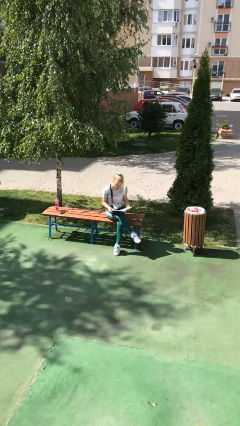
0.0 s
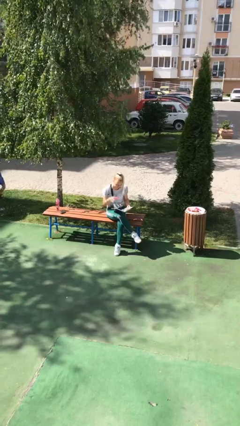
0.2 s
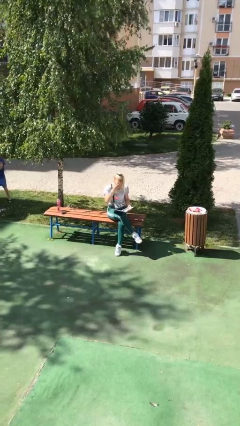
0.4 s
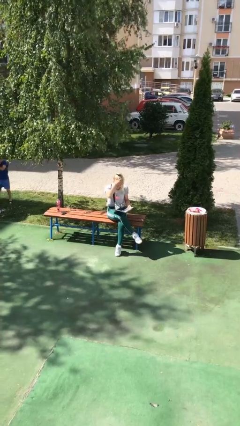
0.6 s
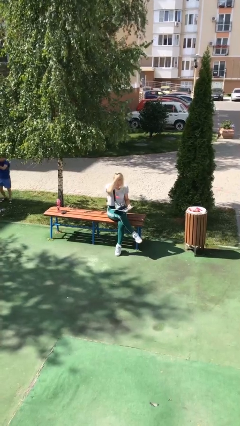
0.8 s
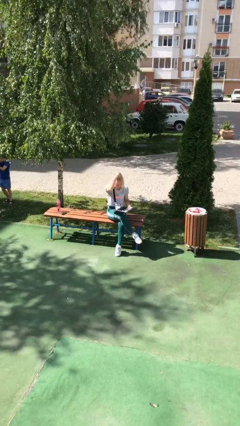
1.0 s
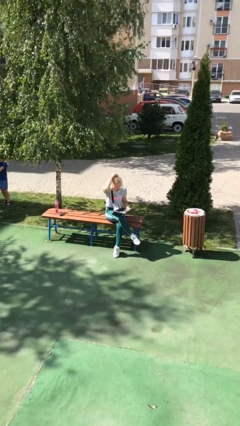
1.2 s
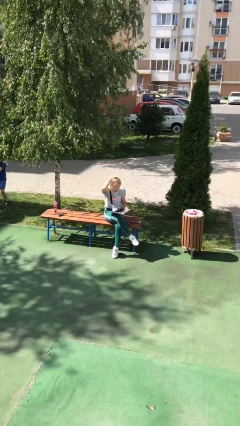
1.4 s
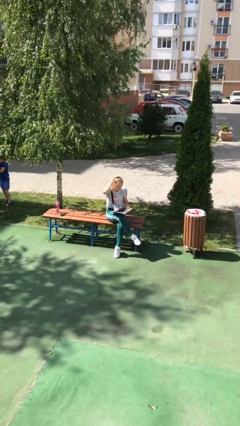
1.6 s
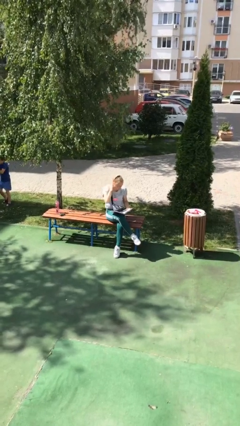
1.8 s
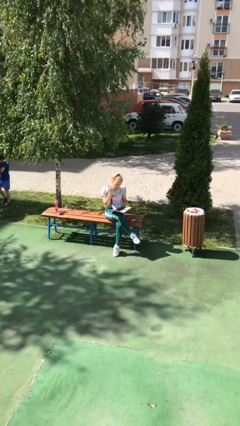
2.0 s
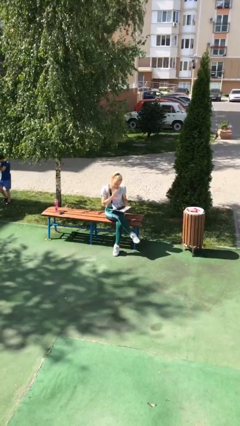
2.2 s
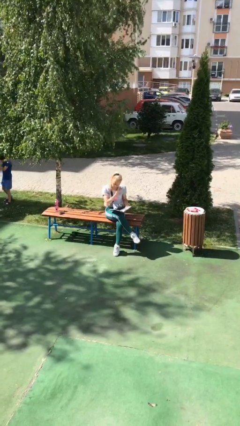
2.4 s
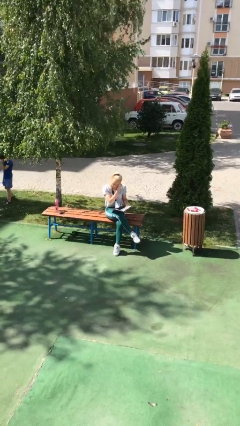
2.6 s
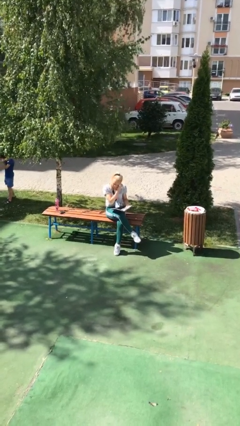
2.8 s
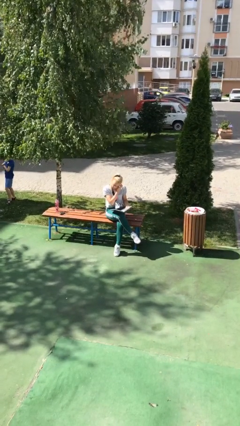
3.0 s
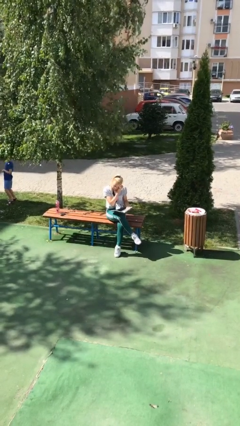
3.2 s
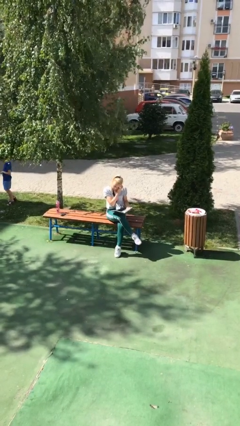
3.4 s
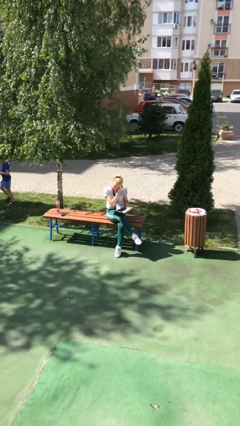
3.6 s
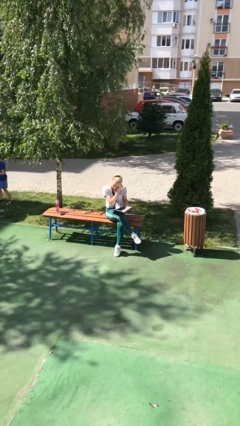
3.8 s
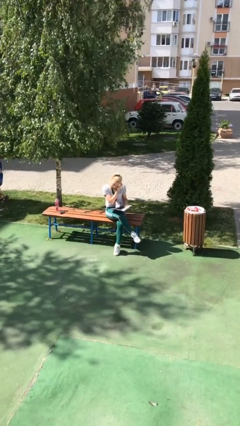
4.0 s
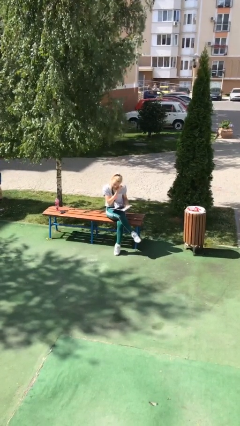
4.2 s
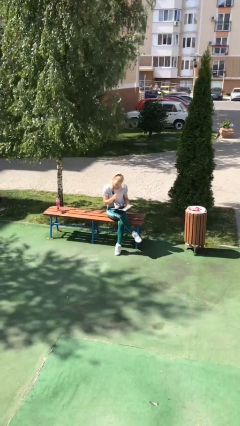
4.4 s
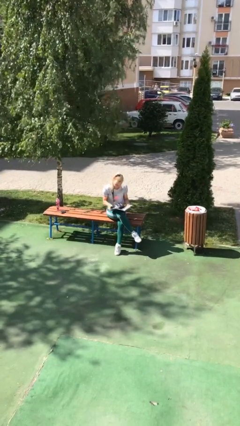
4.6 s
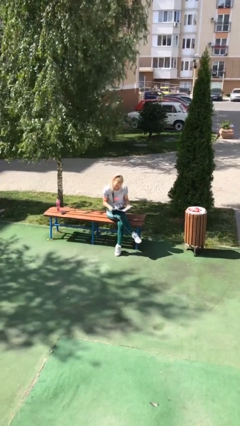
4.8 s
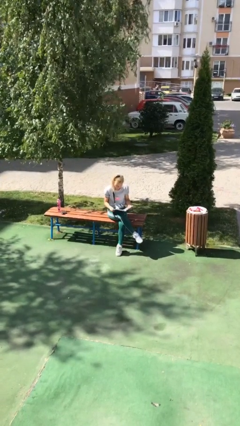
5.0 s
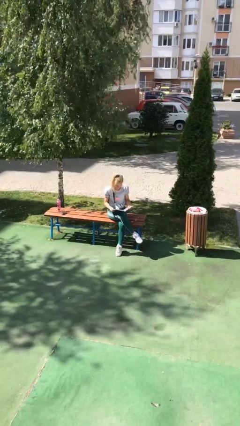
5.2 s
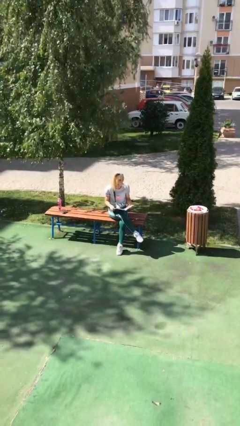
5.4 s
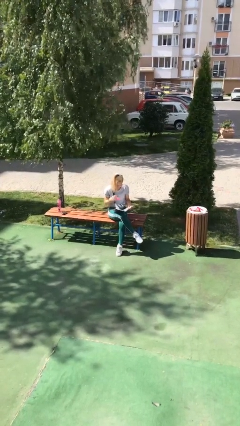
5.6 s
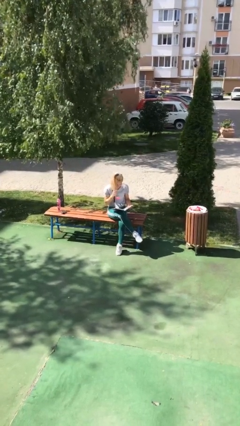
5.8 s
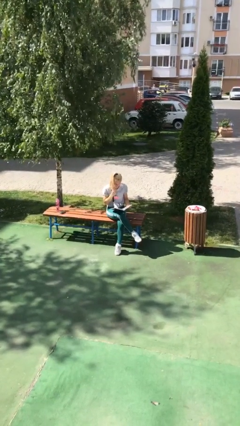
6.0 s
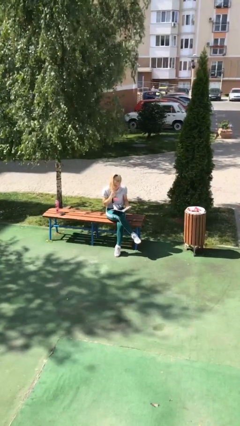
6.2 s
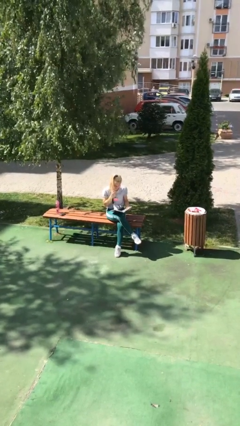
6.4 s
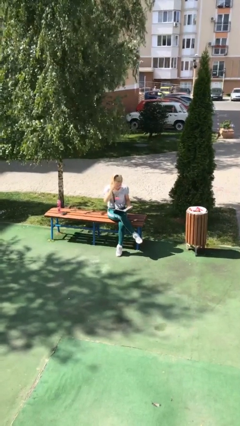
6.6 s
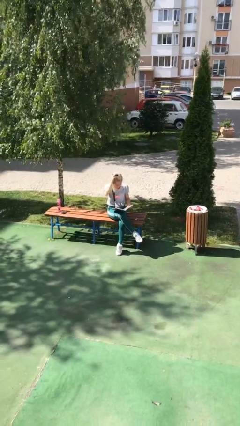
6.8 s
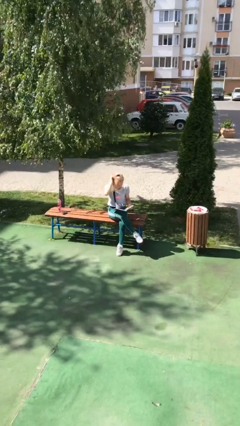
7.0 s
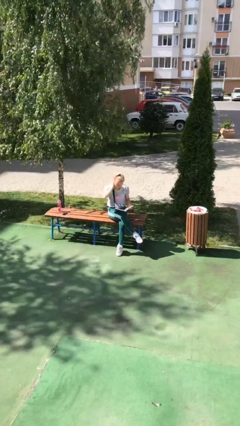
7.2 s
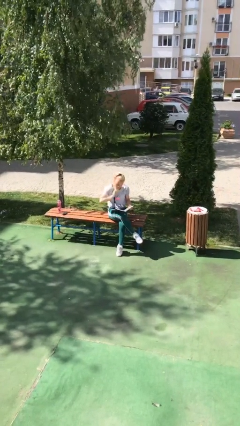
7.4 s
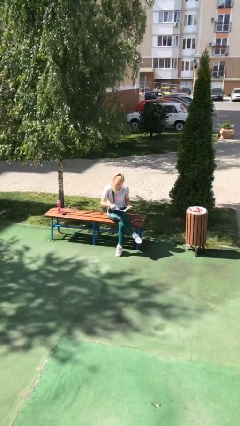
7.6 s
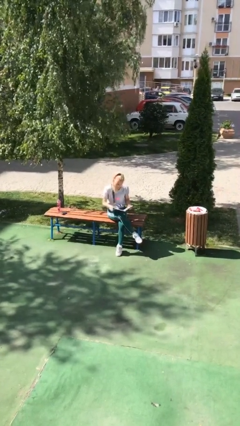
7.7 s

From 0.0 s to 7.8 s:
person reads document

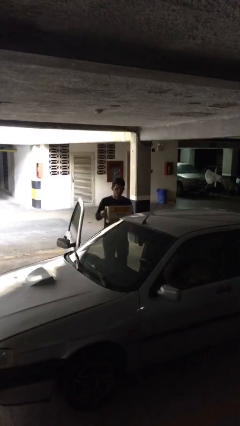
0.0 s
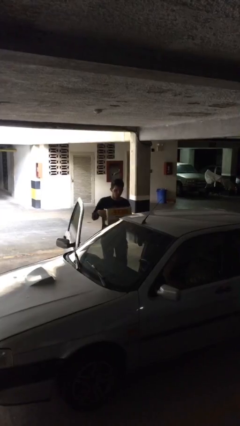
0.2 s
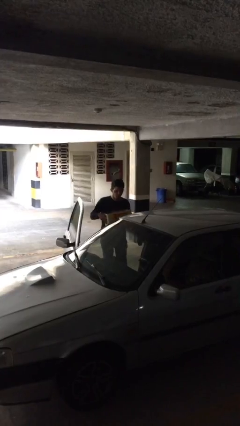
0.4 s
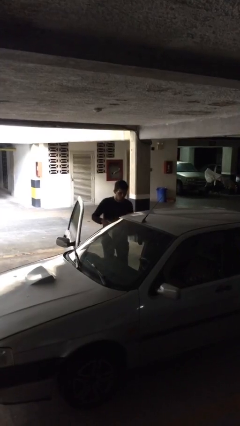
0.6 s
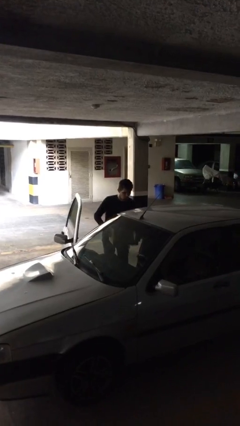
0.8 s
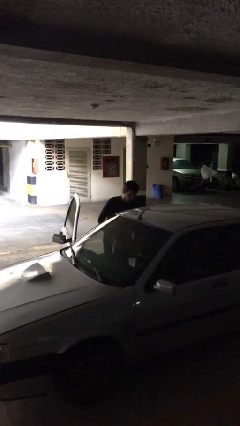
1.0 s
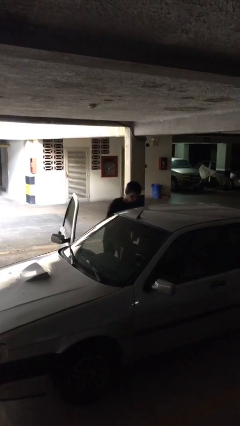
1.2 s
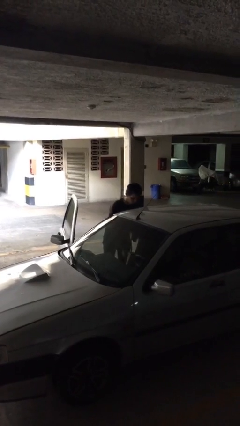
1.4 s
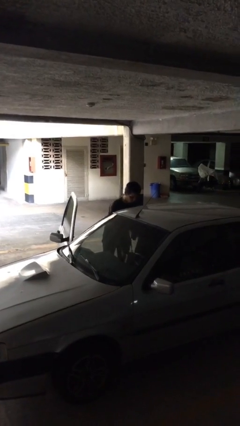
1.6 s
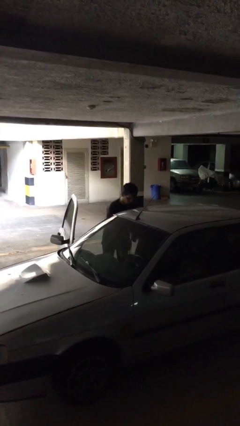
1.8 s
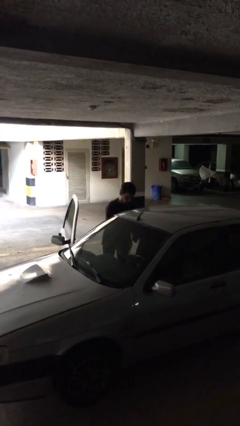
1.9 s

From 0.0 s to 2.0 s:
person loads car

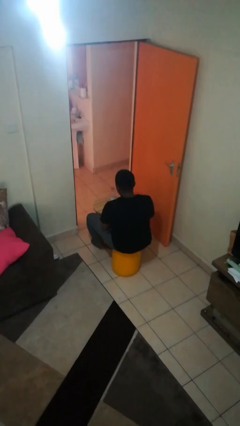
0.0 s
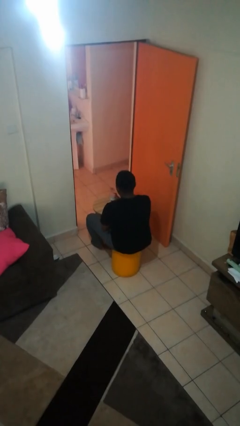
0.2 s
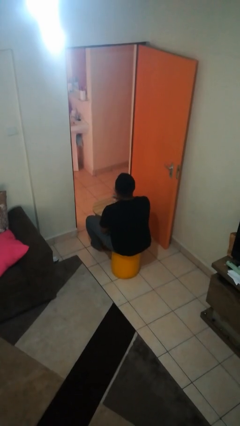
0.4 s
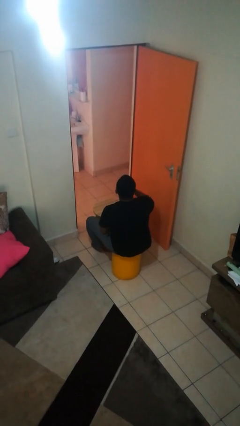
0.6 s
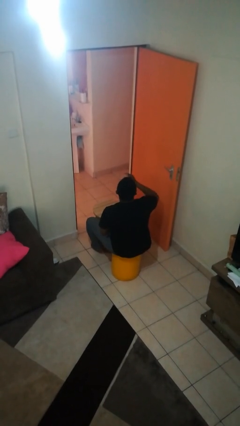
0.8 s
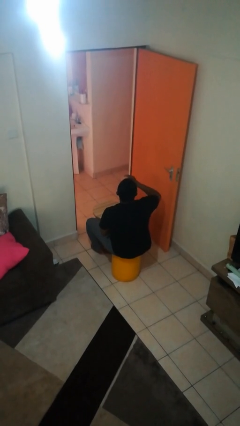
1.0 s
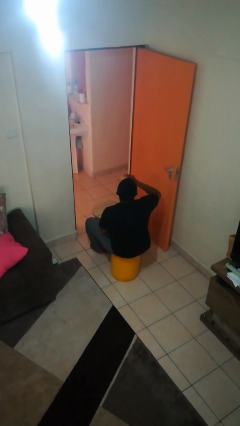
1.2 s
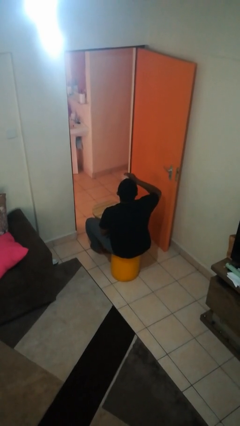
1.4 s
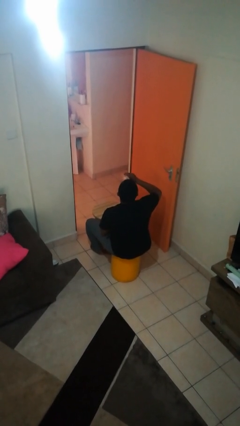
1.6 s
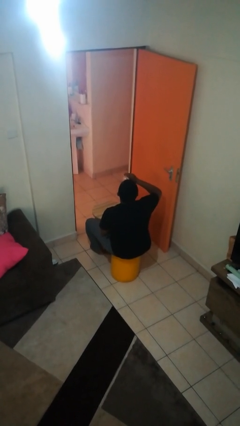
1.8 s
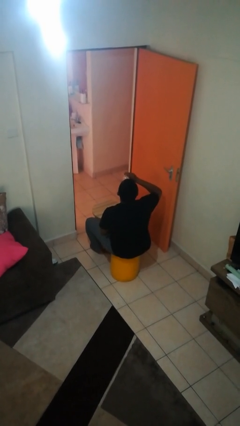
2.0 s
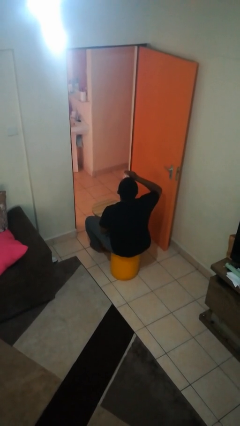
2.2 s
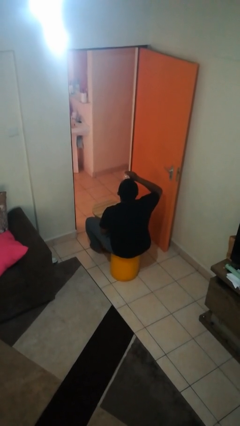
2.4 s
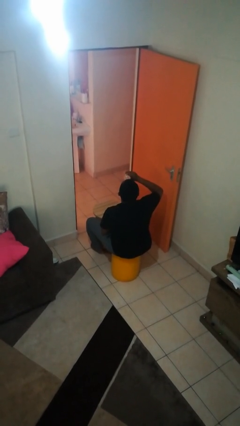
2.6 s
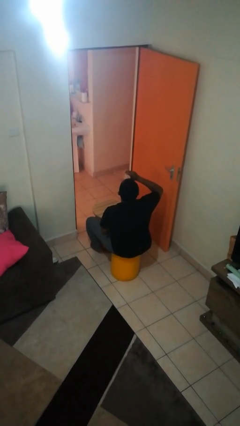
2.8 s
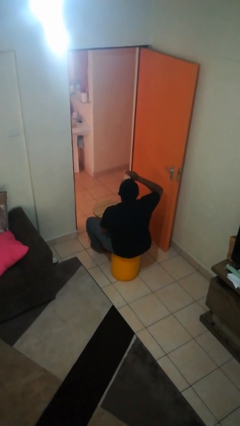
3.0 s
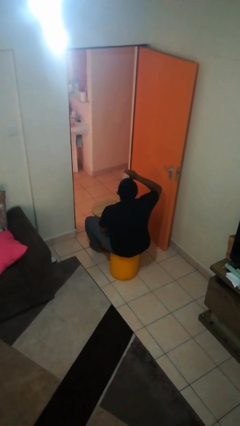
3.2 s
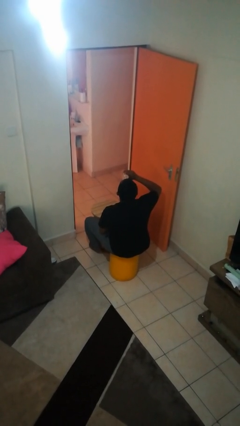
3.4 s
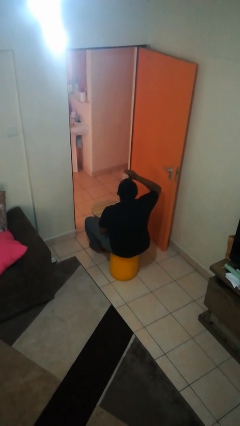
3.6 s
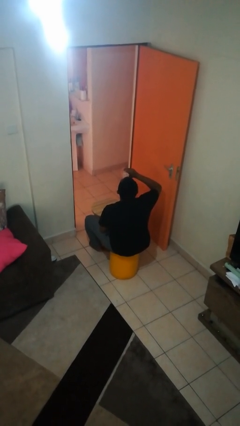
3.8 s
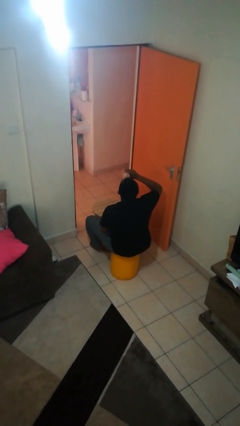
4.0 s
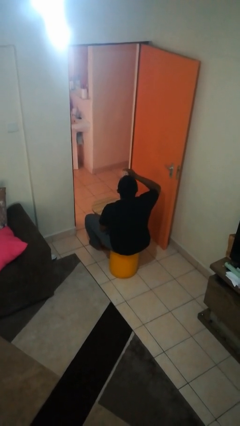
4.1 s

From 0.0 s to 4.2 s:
person drinks from bottle

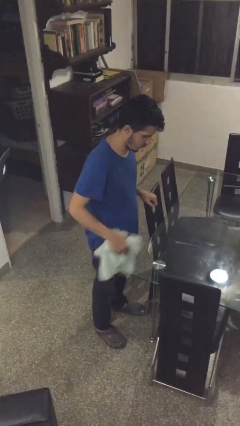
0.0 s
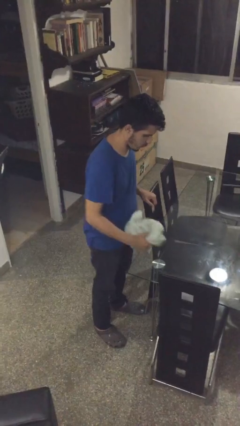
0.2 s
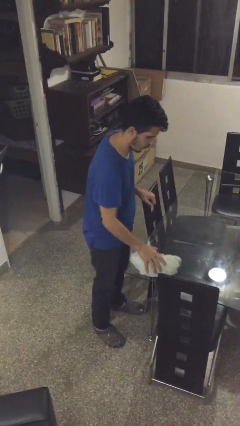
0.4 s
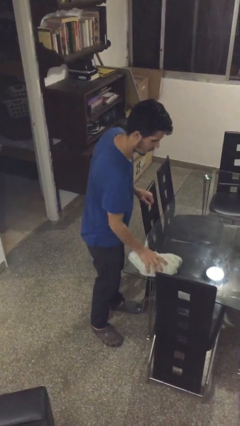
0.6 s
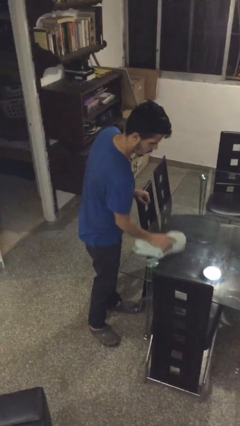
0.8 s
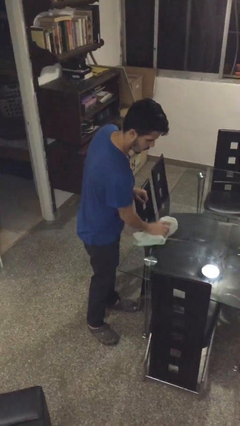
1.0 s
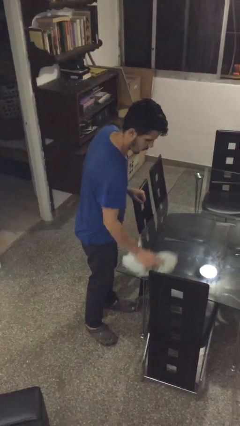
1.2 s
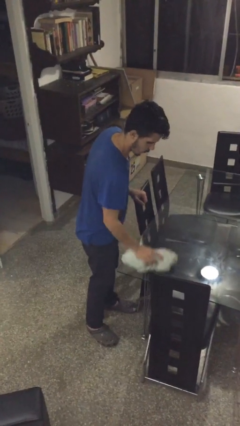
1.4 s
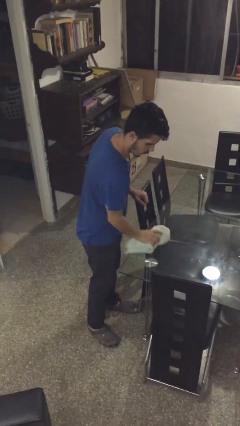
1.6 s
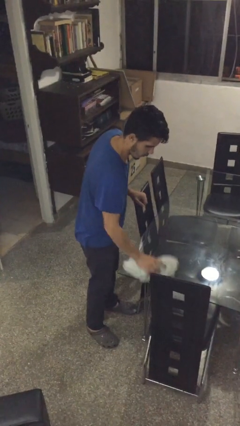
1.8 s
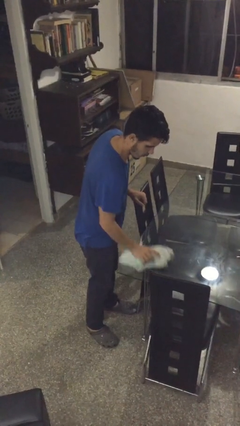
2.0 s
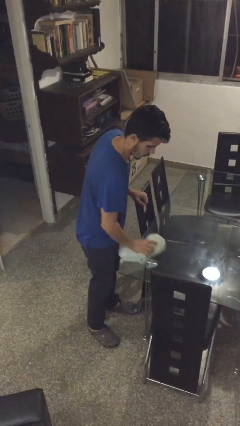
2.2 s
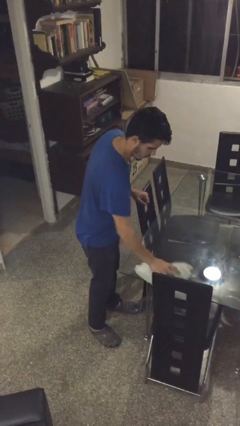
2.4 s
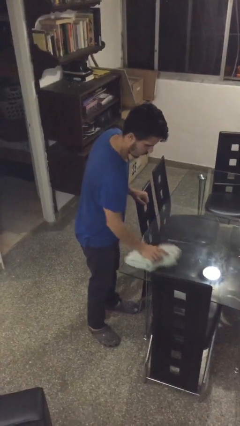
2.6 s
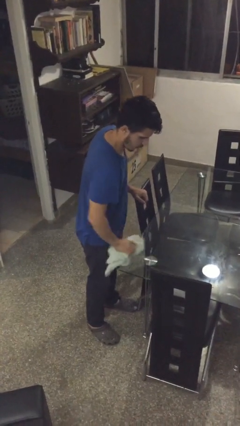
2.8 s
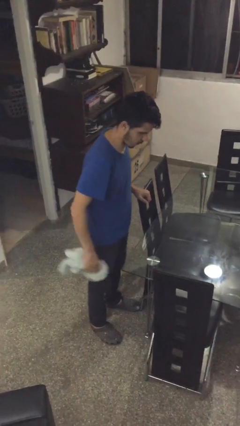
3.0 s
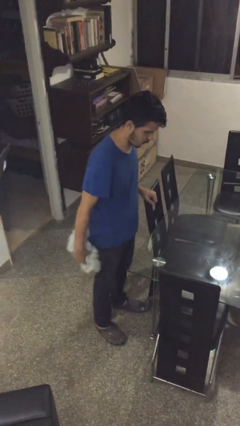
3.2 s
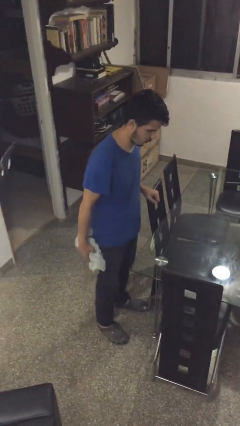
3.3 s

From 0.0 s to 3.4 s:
person cleans table with rag

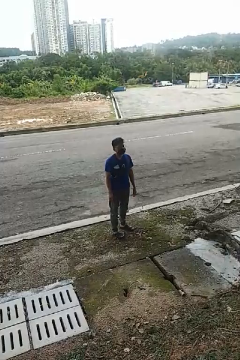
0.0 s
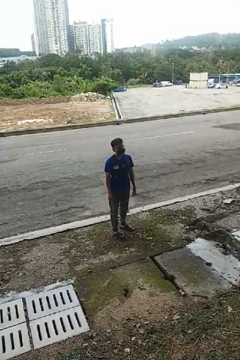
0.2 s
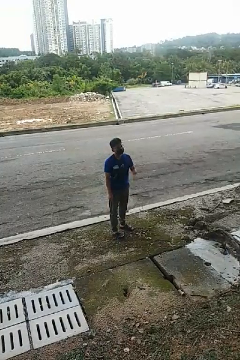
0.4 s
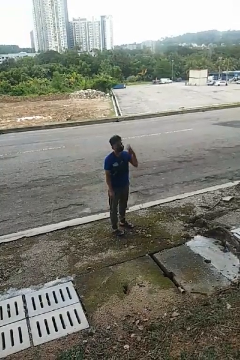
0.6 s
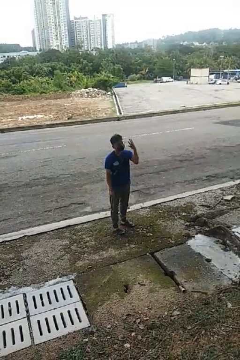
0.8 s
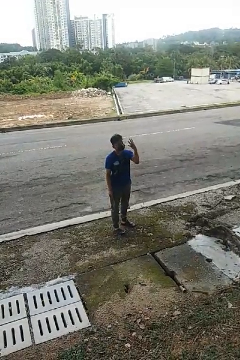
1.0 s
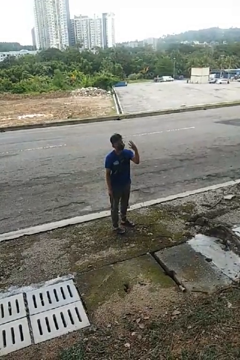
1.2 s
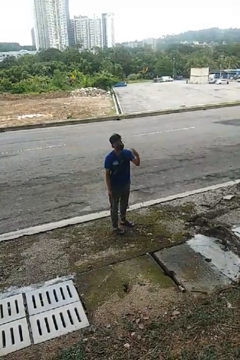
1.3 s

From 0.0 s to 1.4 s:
person gestures number four
